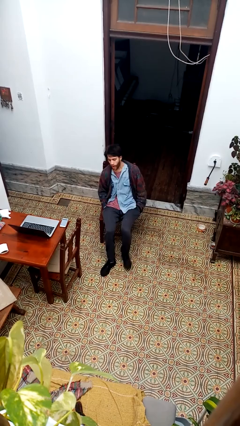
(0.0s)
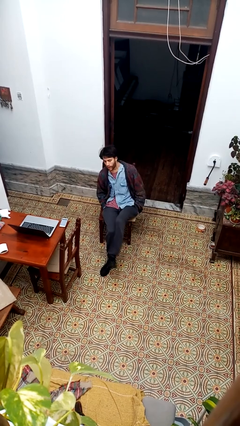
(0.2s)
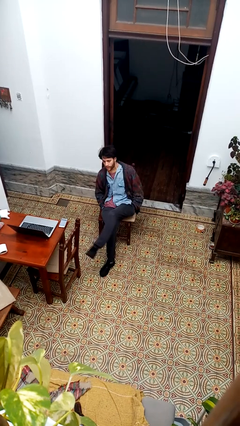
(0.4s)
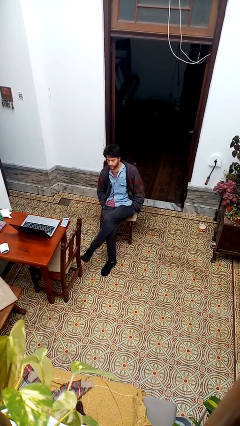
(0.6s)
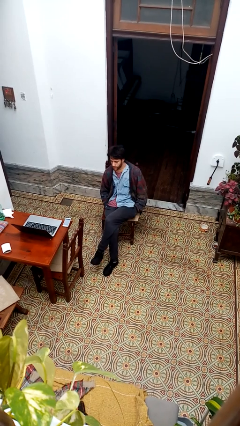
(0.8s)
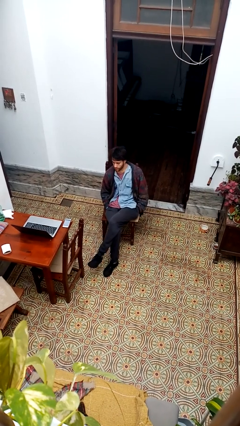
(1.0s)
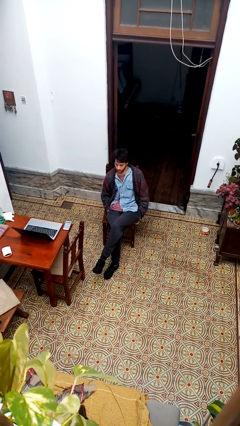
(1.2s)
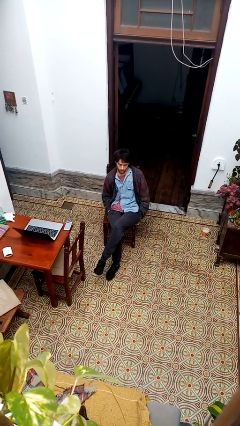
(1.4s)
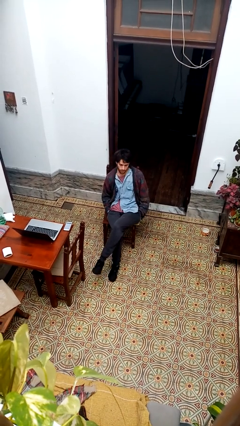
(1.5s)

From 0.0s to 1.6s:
person crosses legs

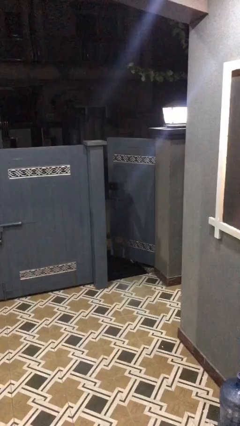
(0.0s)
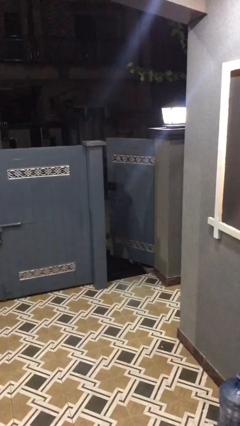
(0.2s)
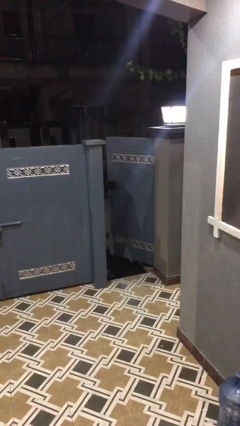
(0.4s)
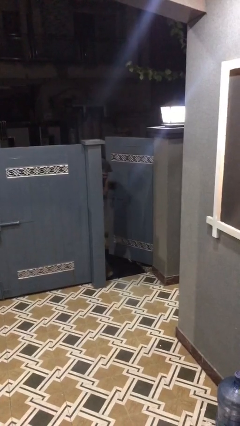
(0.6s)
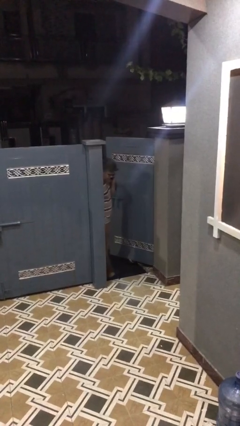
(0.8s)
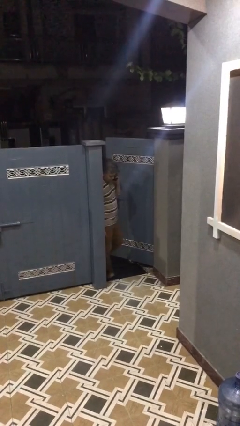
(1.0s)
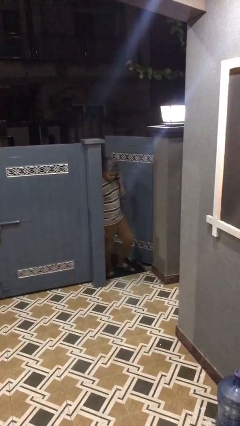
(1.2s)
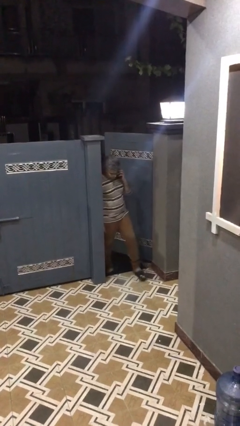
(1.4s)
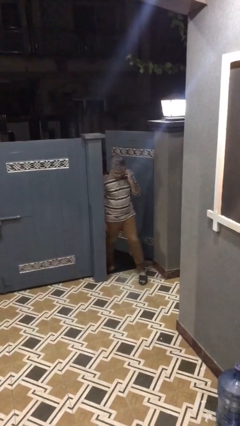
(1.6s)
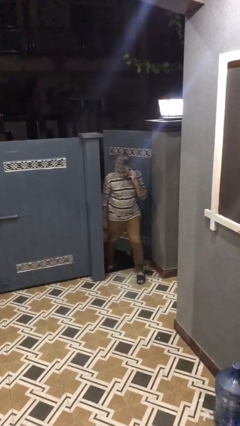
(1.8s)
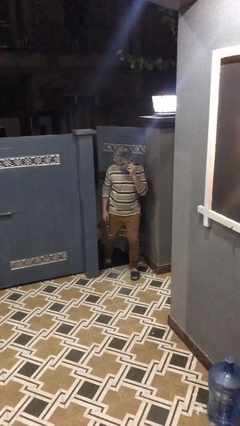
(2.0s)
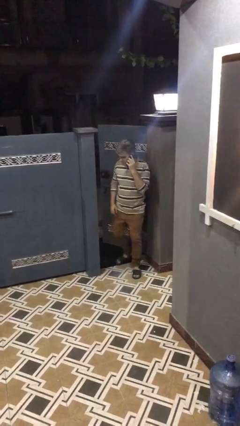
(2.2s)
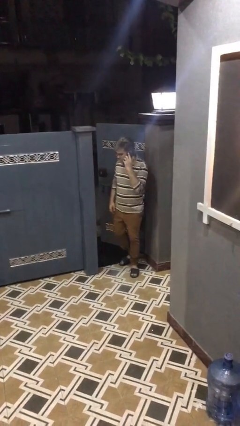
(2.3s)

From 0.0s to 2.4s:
person enters scene through structure

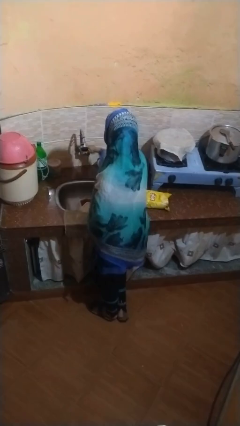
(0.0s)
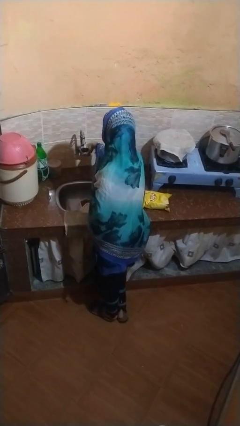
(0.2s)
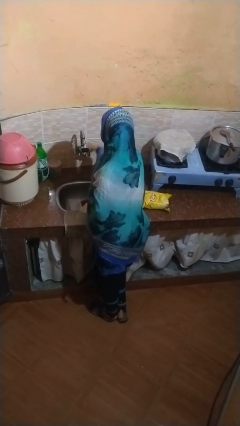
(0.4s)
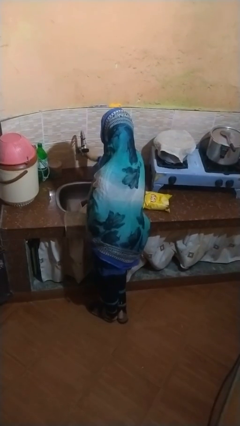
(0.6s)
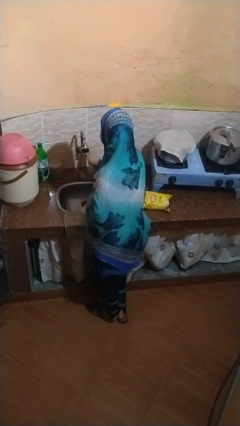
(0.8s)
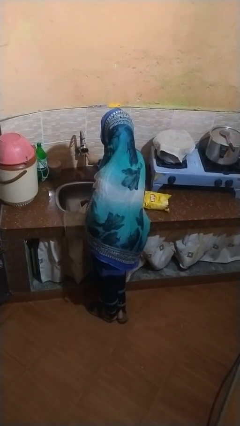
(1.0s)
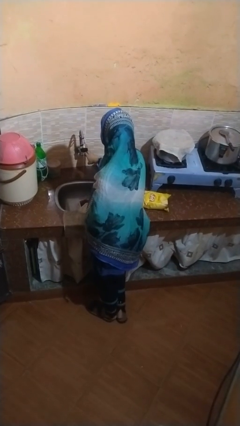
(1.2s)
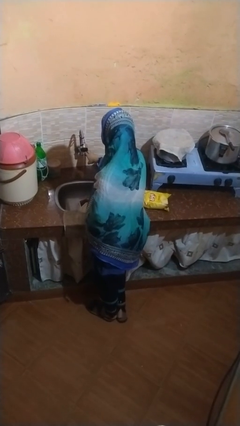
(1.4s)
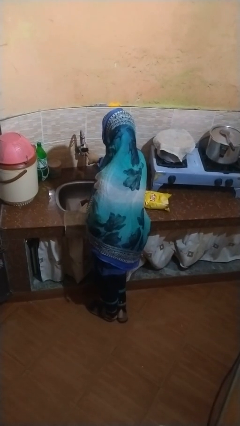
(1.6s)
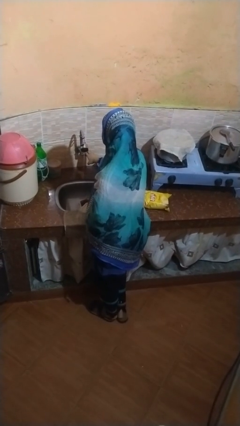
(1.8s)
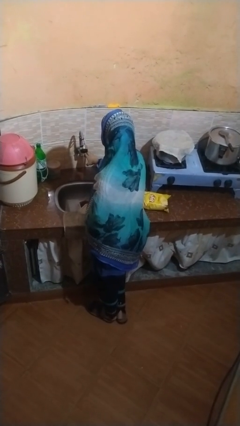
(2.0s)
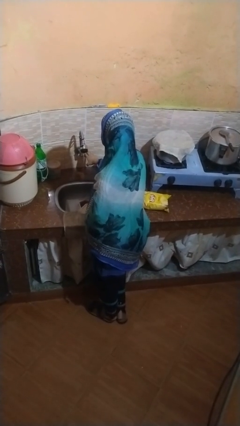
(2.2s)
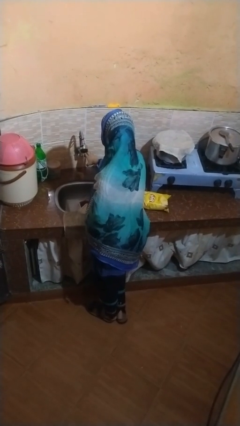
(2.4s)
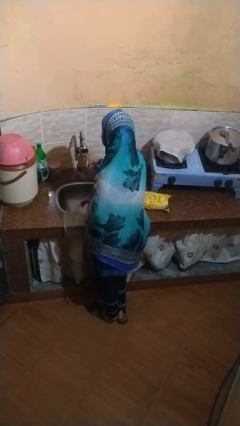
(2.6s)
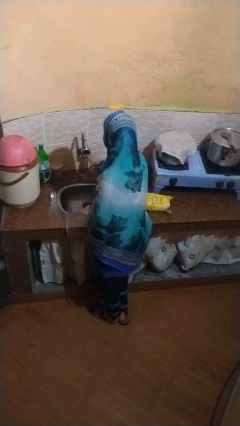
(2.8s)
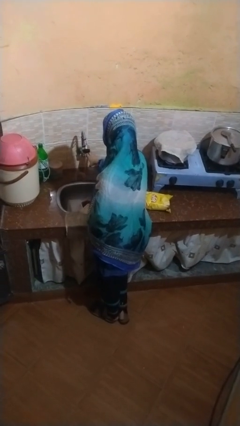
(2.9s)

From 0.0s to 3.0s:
person turns on faucet

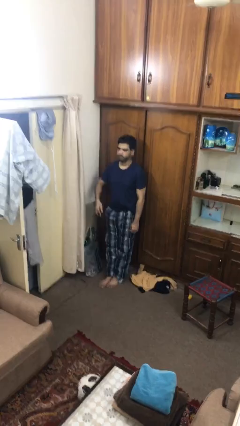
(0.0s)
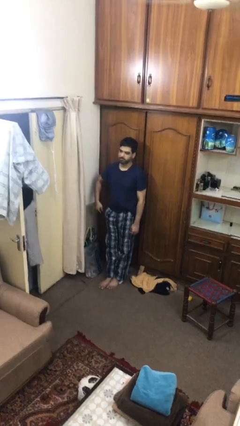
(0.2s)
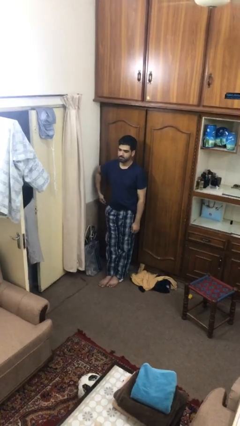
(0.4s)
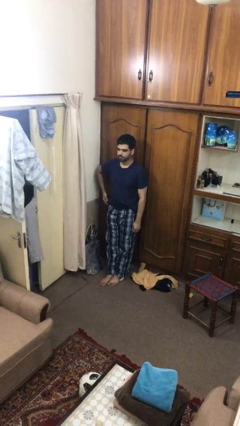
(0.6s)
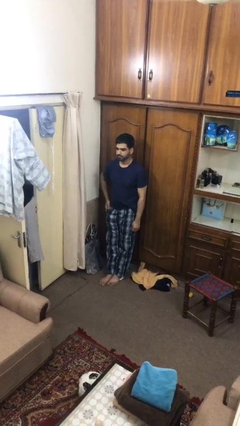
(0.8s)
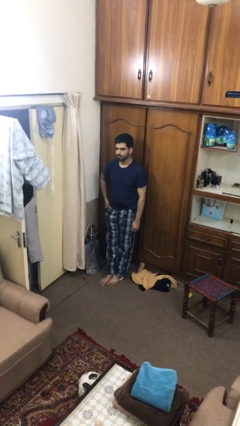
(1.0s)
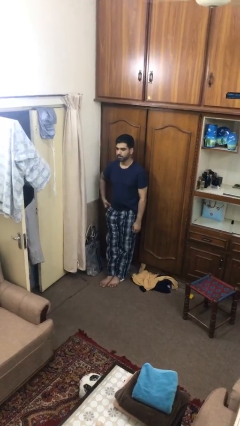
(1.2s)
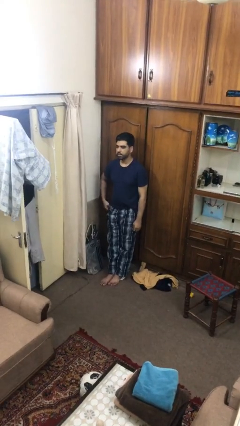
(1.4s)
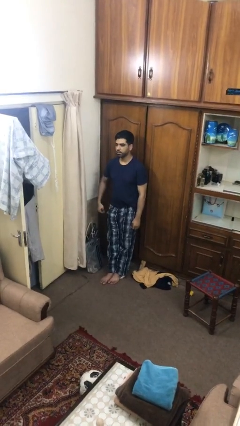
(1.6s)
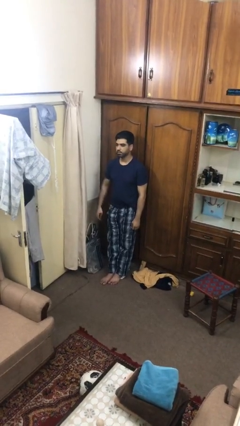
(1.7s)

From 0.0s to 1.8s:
person puts phone into pocket

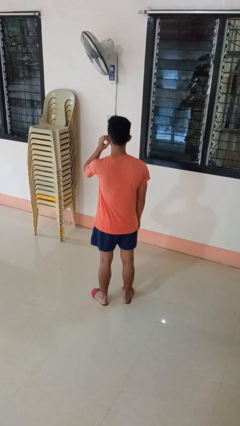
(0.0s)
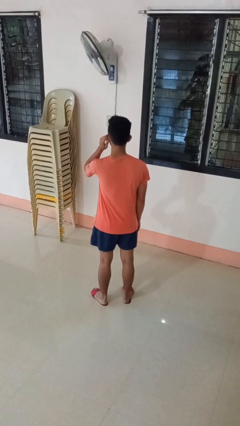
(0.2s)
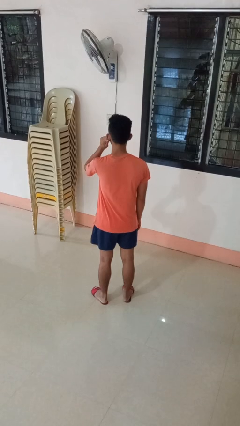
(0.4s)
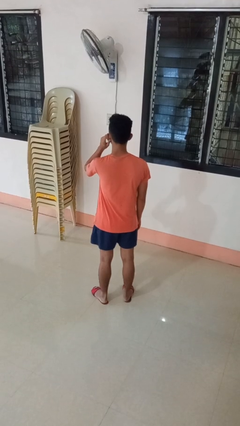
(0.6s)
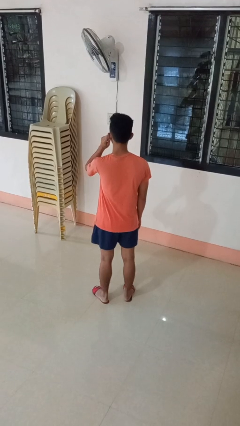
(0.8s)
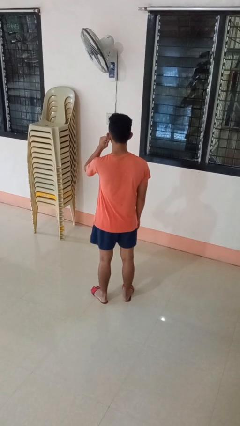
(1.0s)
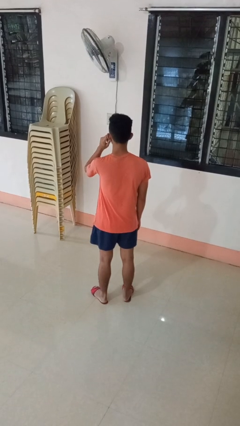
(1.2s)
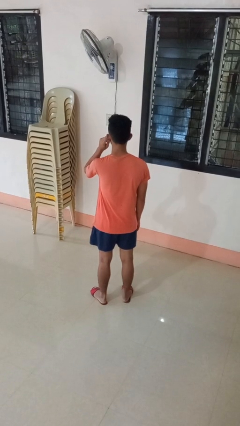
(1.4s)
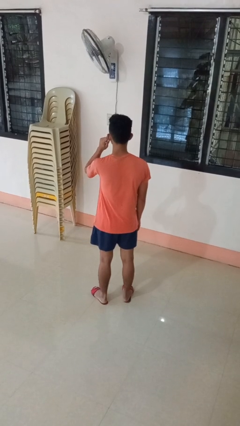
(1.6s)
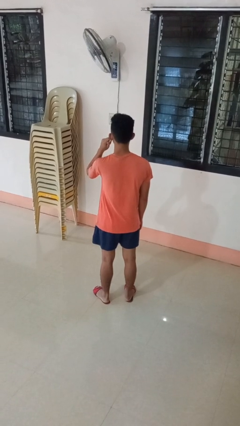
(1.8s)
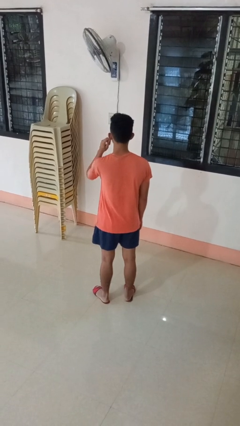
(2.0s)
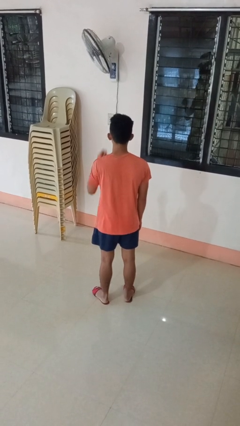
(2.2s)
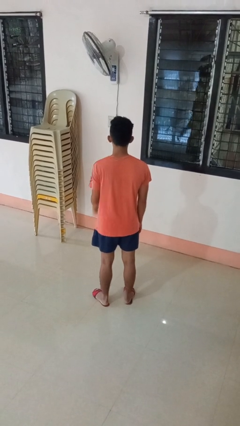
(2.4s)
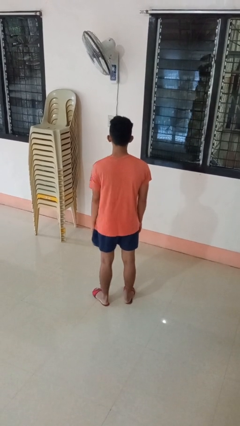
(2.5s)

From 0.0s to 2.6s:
person touches earlobe

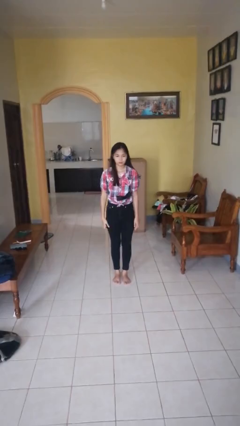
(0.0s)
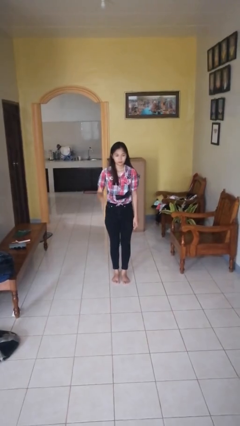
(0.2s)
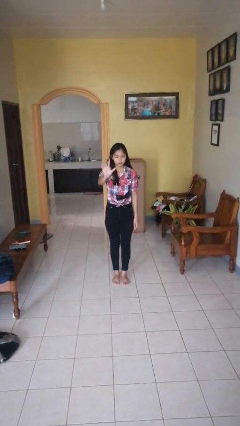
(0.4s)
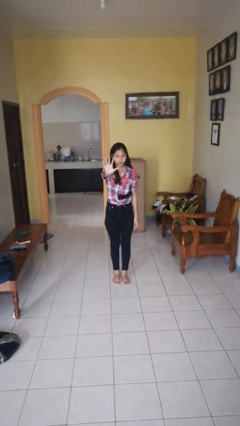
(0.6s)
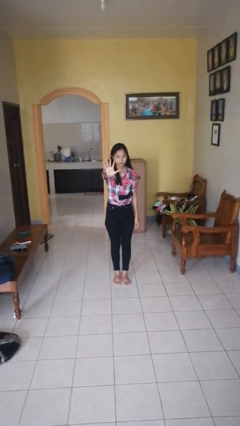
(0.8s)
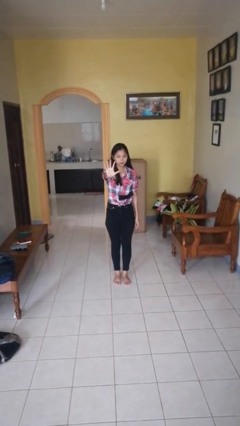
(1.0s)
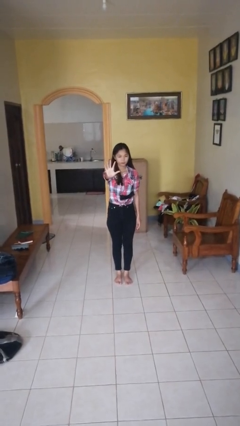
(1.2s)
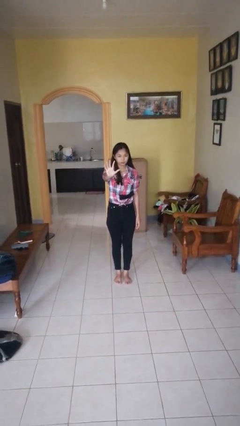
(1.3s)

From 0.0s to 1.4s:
person gestures number five

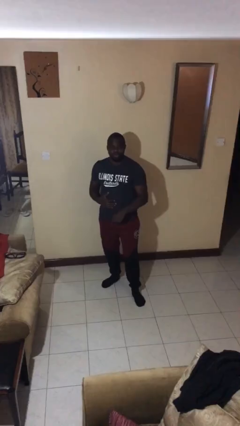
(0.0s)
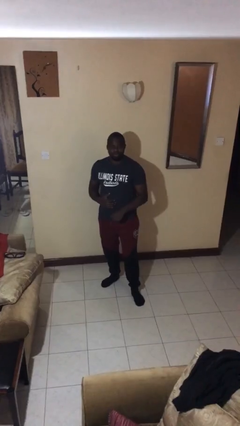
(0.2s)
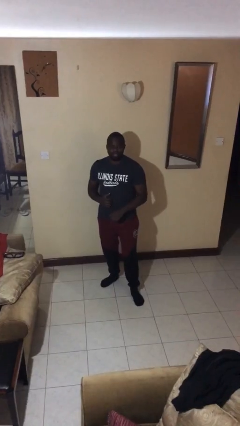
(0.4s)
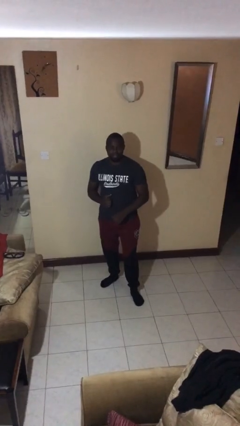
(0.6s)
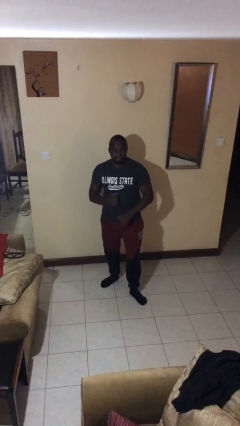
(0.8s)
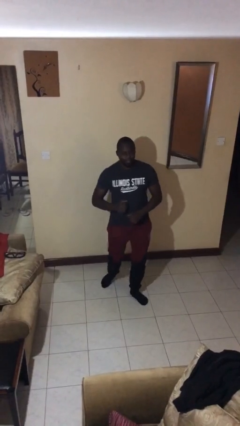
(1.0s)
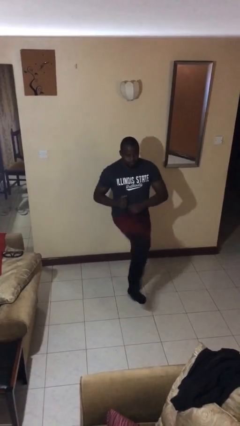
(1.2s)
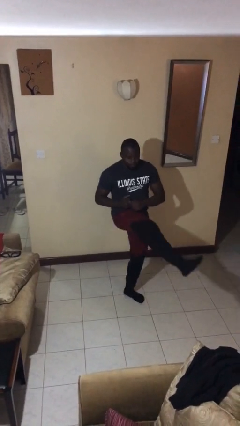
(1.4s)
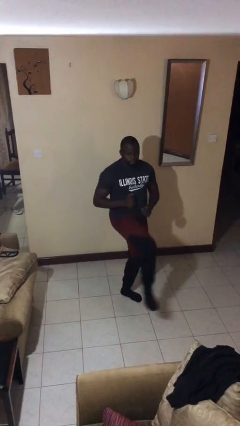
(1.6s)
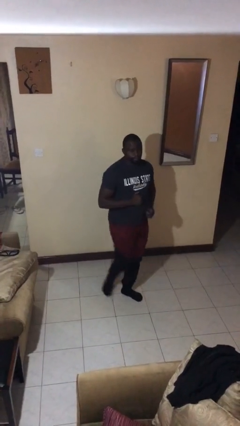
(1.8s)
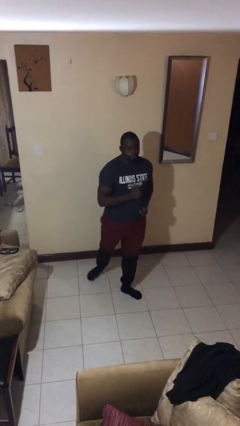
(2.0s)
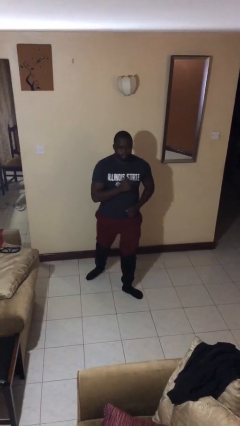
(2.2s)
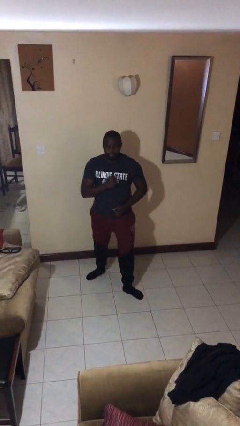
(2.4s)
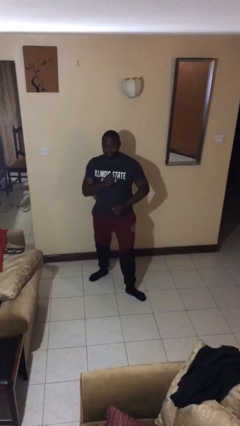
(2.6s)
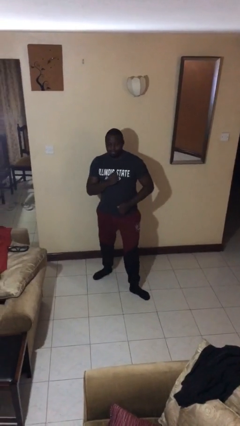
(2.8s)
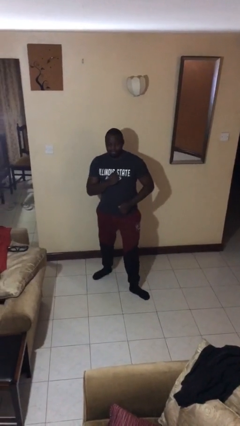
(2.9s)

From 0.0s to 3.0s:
person karate kicks

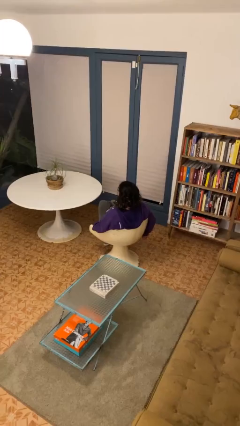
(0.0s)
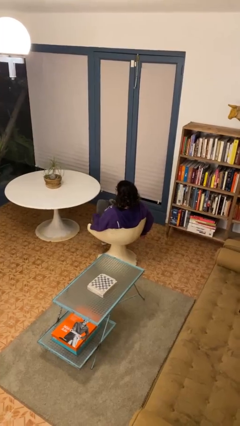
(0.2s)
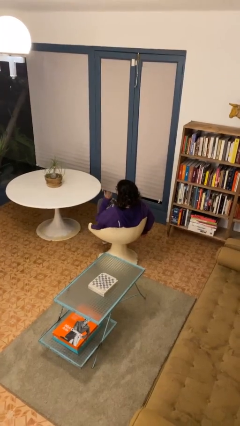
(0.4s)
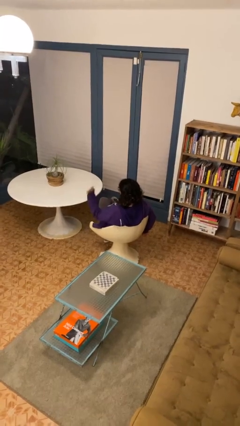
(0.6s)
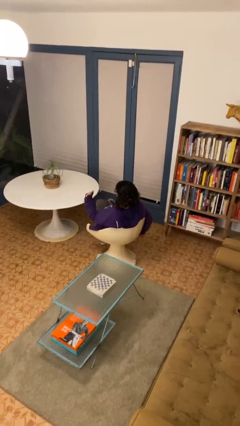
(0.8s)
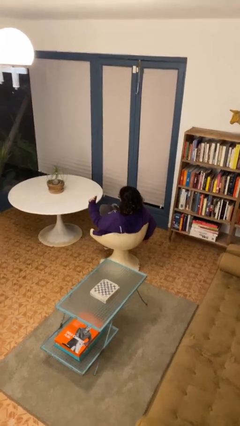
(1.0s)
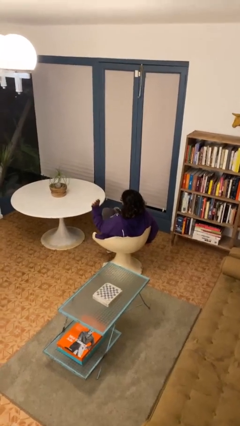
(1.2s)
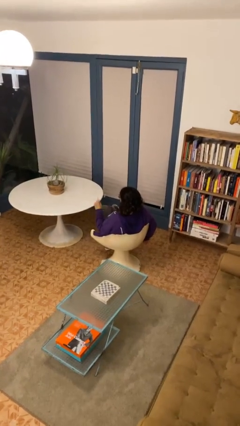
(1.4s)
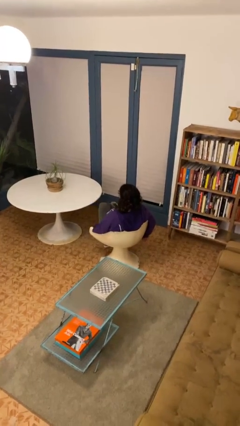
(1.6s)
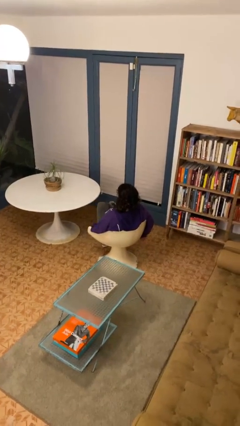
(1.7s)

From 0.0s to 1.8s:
person gestures stop
